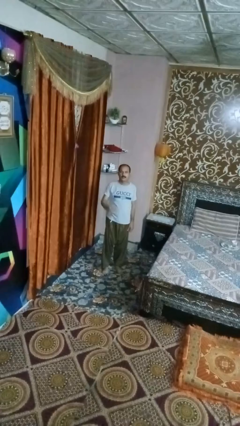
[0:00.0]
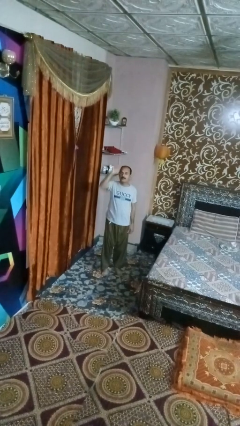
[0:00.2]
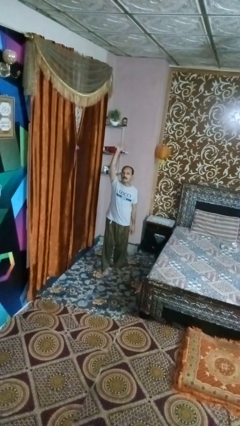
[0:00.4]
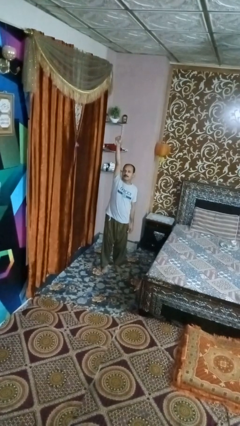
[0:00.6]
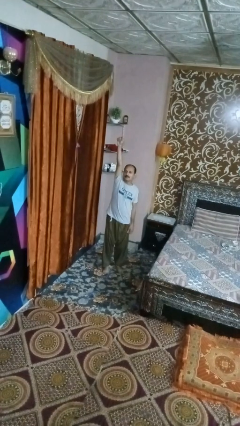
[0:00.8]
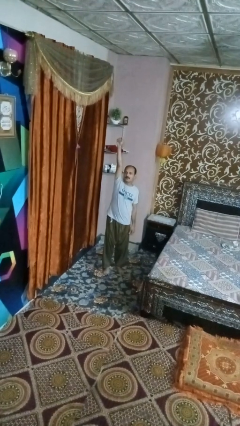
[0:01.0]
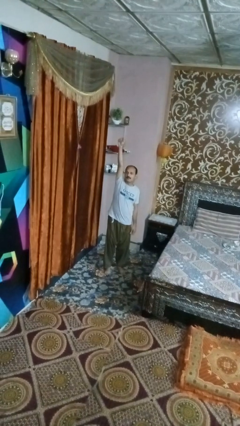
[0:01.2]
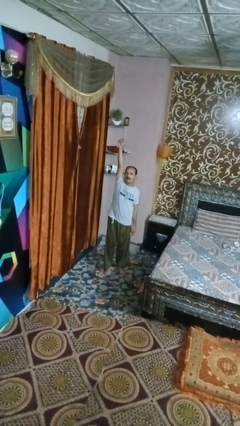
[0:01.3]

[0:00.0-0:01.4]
person punches

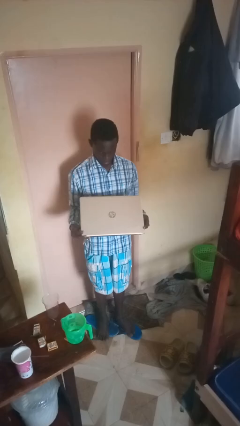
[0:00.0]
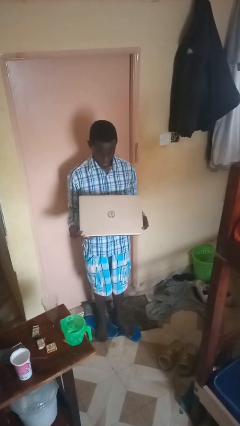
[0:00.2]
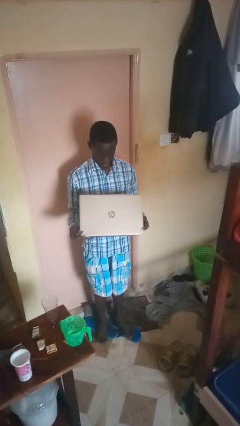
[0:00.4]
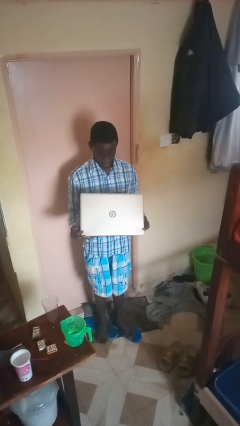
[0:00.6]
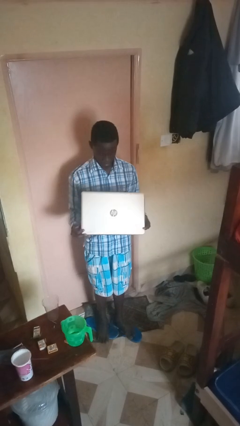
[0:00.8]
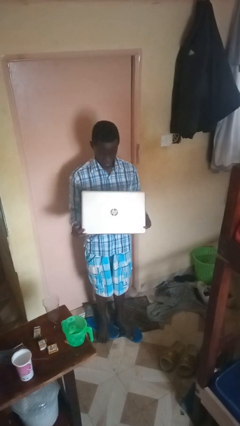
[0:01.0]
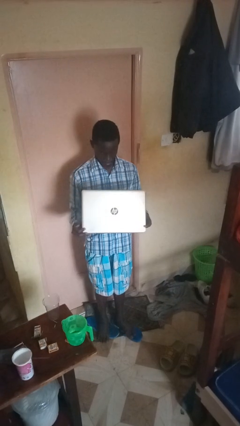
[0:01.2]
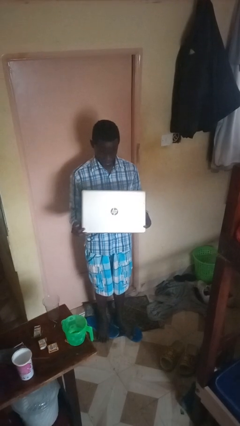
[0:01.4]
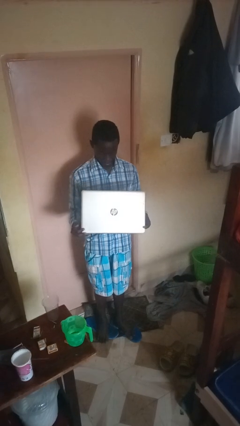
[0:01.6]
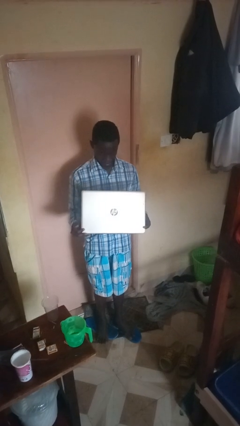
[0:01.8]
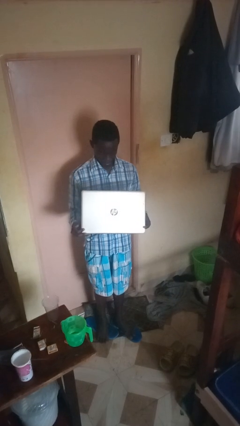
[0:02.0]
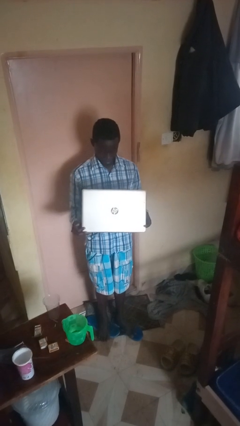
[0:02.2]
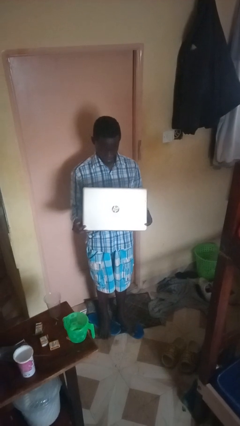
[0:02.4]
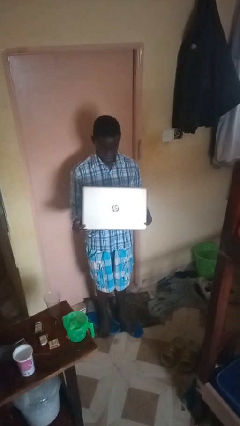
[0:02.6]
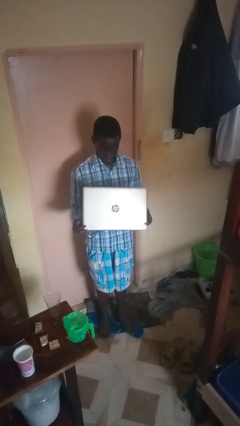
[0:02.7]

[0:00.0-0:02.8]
person opens laptop

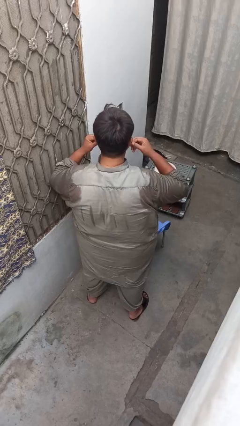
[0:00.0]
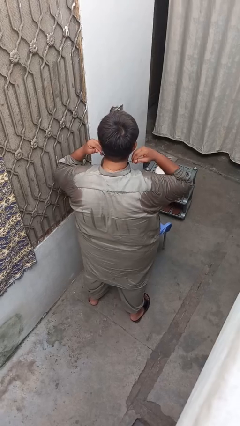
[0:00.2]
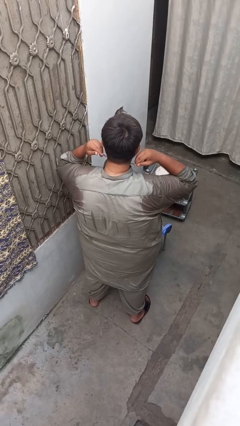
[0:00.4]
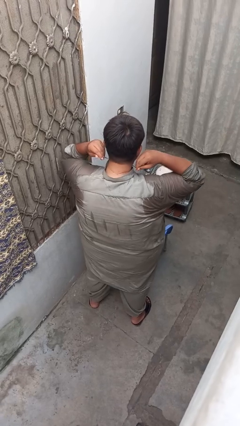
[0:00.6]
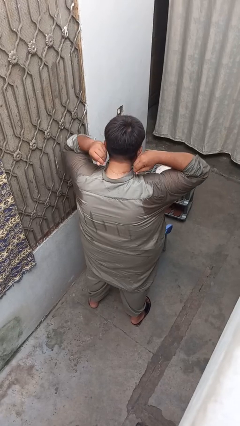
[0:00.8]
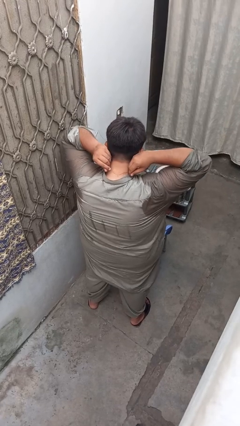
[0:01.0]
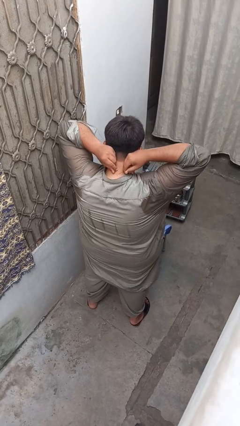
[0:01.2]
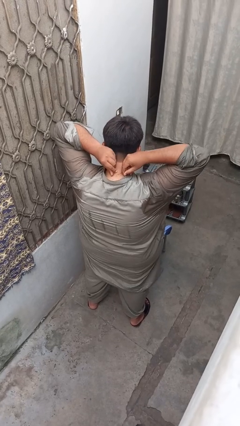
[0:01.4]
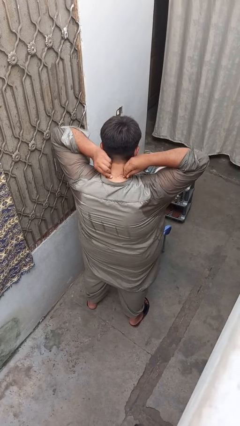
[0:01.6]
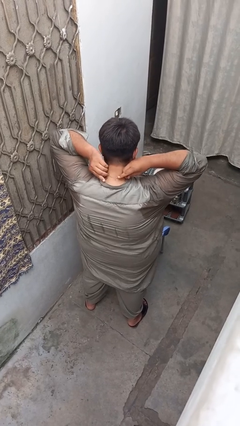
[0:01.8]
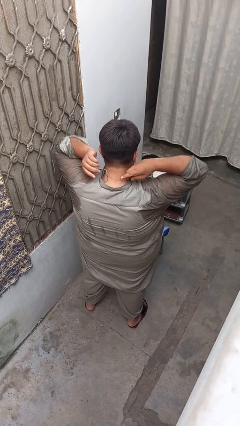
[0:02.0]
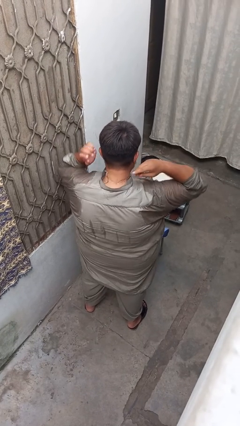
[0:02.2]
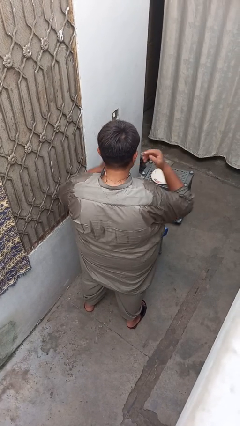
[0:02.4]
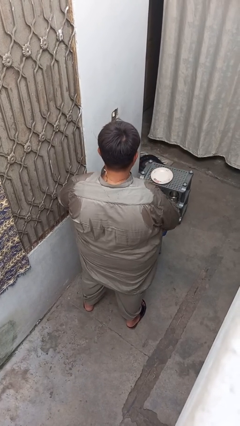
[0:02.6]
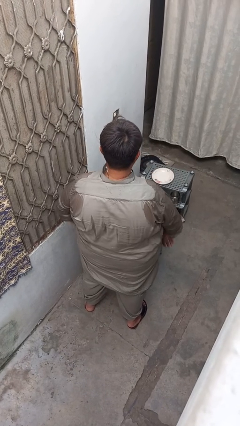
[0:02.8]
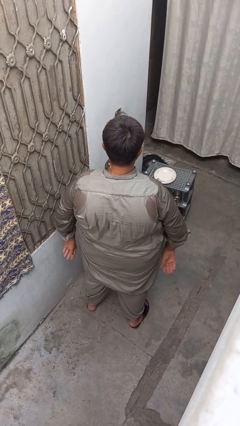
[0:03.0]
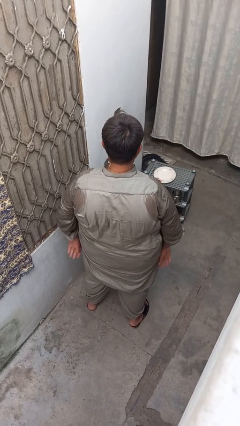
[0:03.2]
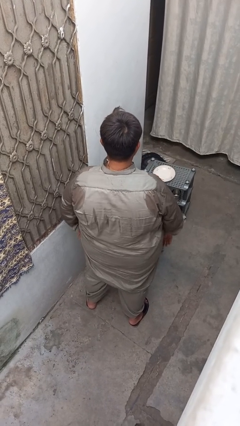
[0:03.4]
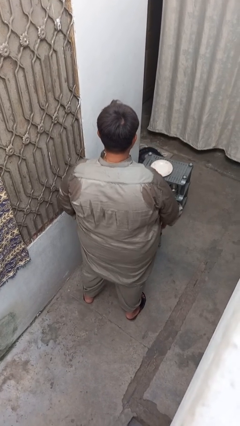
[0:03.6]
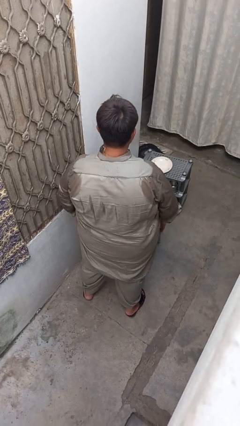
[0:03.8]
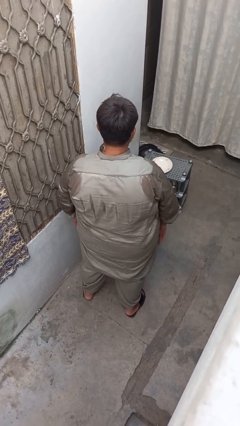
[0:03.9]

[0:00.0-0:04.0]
person puts on necklace

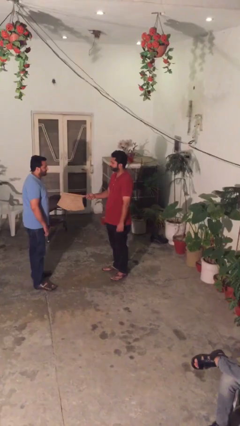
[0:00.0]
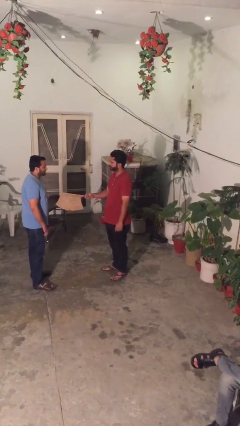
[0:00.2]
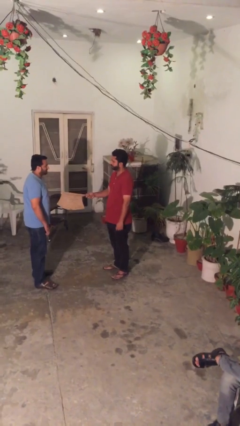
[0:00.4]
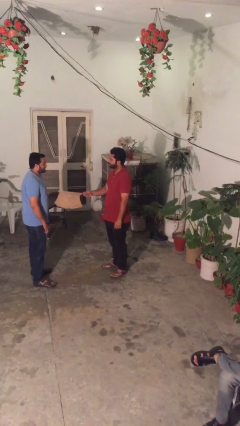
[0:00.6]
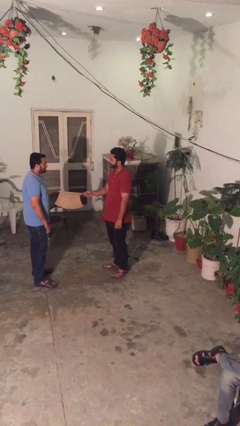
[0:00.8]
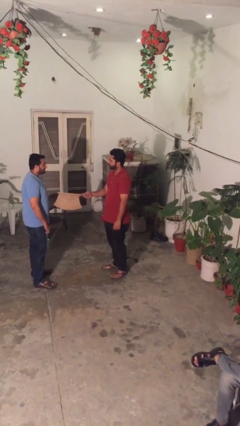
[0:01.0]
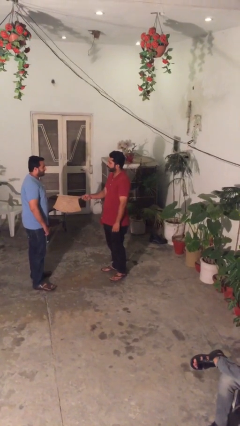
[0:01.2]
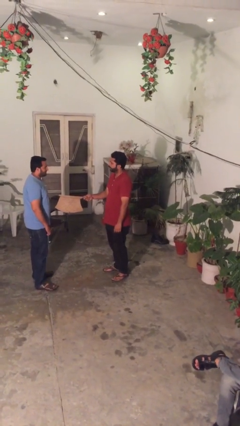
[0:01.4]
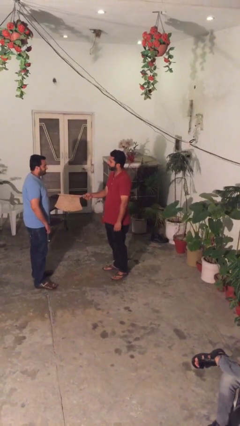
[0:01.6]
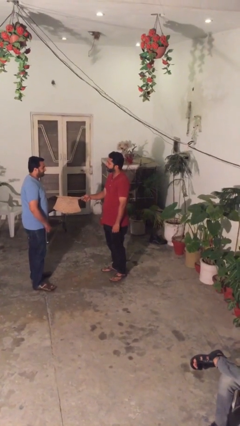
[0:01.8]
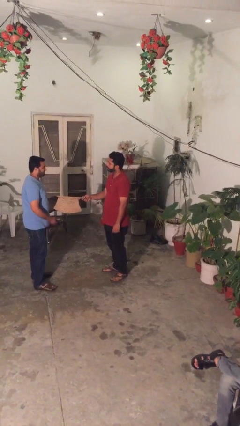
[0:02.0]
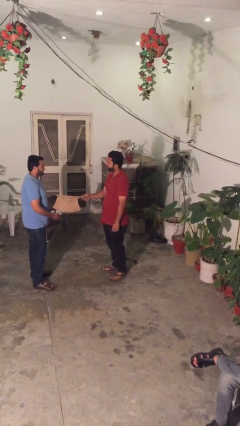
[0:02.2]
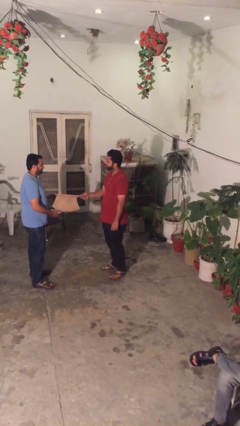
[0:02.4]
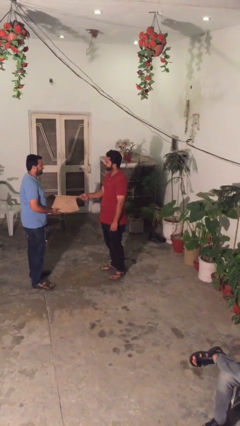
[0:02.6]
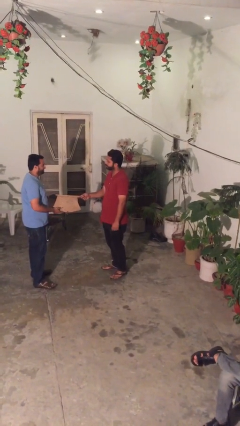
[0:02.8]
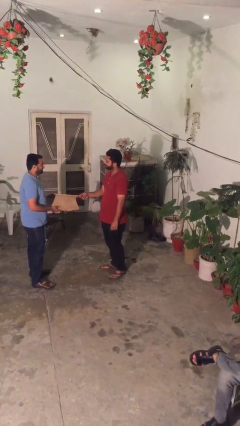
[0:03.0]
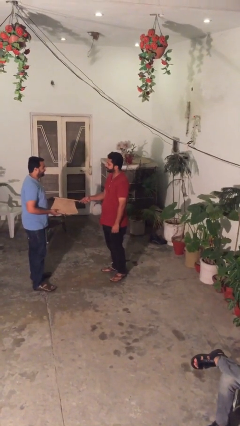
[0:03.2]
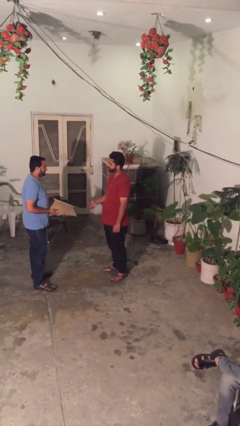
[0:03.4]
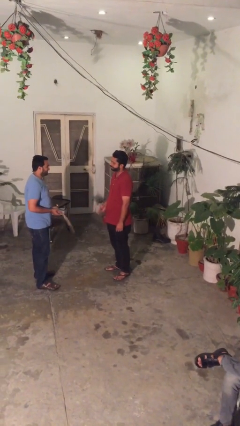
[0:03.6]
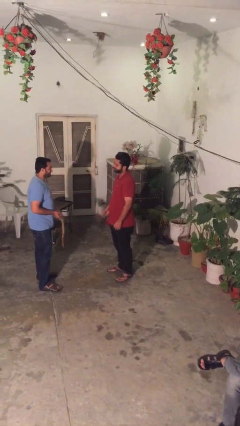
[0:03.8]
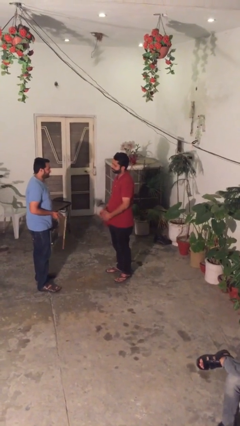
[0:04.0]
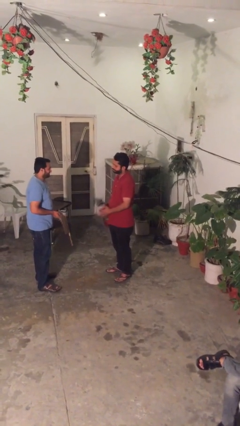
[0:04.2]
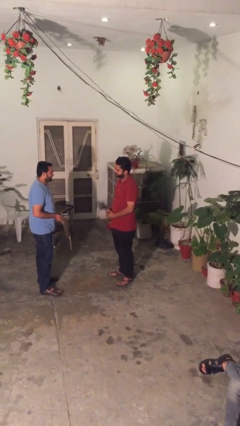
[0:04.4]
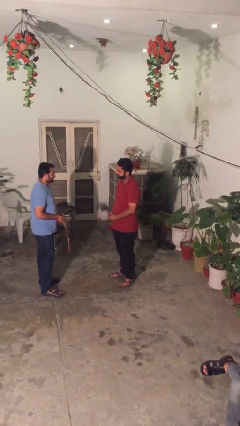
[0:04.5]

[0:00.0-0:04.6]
person transfers object to person

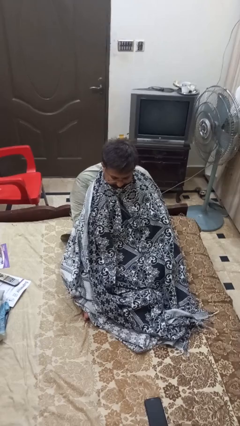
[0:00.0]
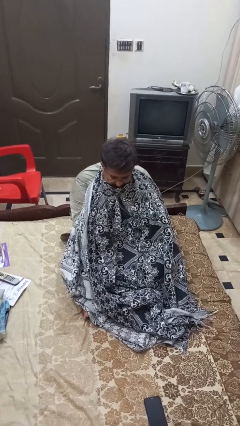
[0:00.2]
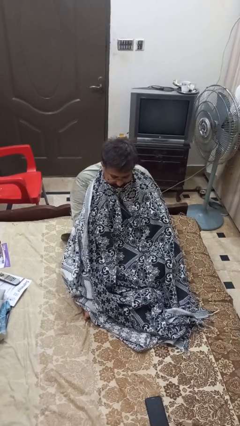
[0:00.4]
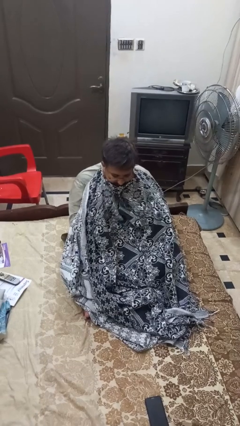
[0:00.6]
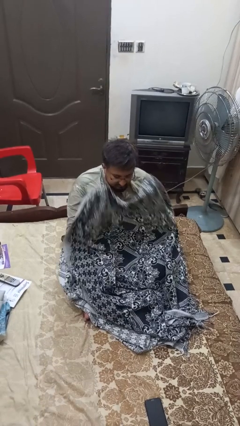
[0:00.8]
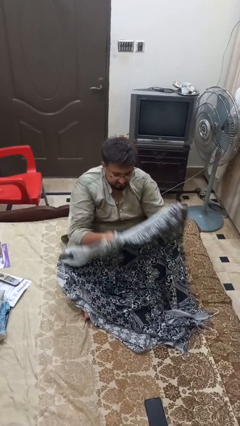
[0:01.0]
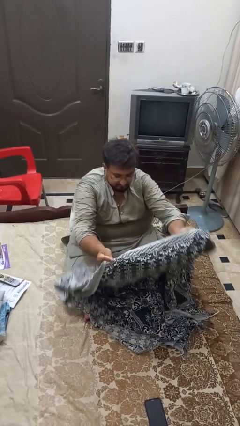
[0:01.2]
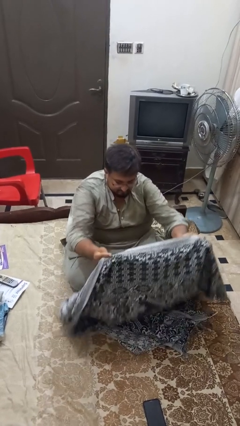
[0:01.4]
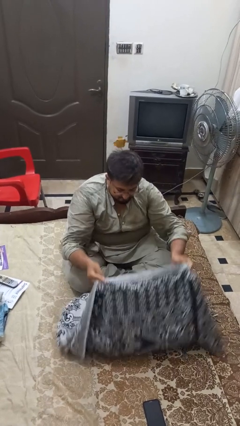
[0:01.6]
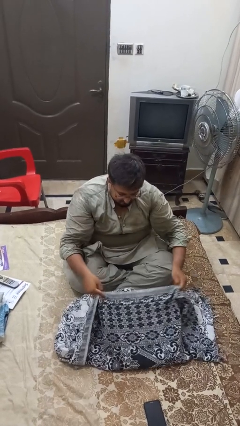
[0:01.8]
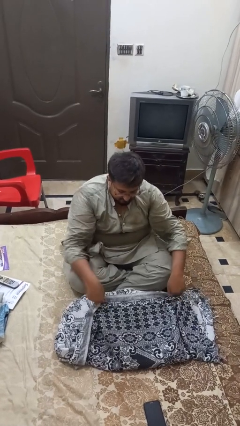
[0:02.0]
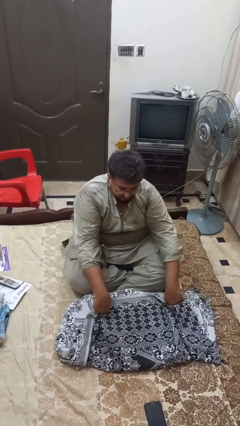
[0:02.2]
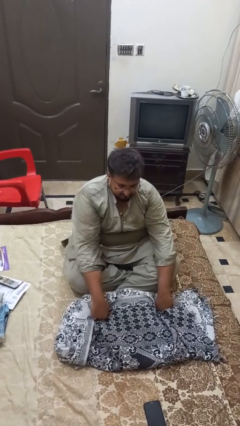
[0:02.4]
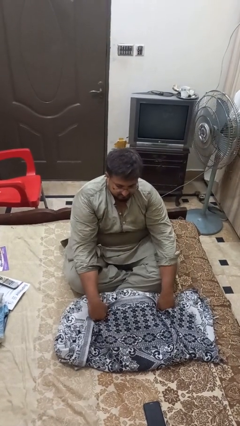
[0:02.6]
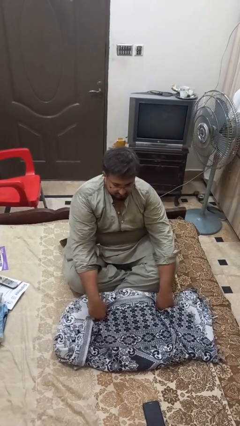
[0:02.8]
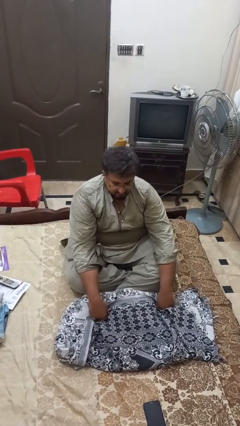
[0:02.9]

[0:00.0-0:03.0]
person uncovers with blanket

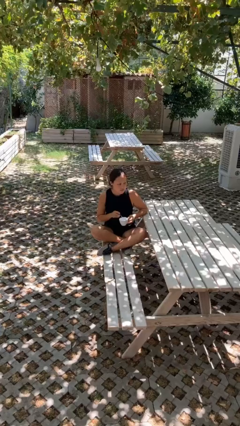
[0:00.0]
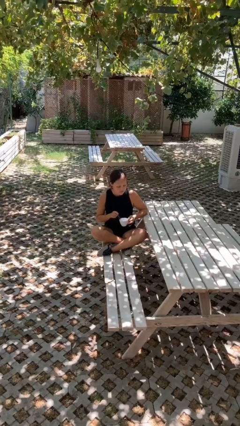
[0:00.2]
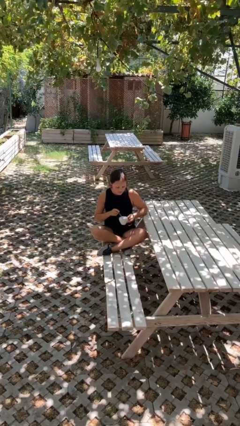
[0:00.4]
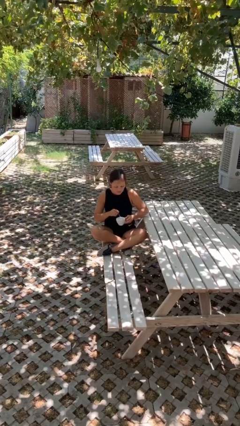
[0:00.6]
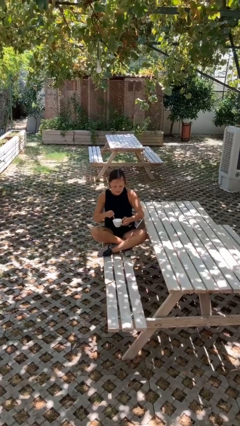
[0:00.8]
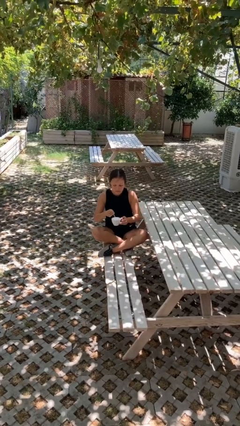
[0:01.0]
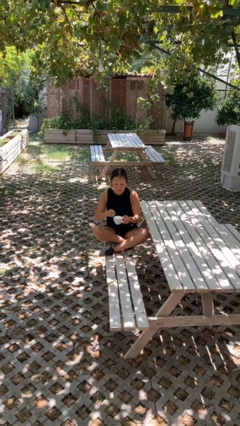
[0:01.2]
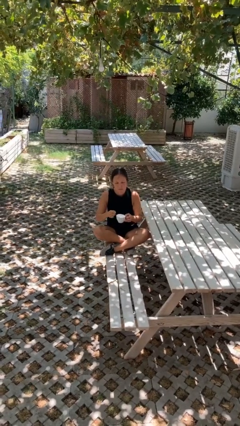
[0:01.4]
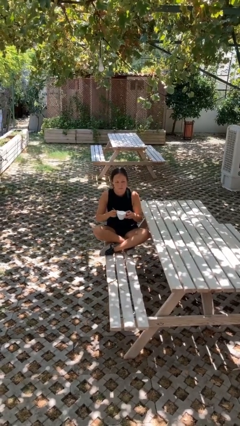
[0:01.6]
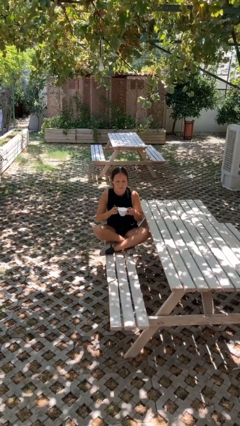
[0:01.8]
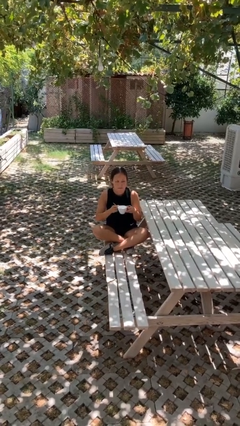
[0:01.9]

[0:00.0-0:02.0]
person stirs mug
